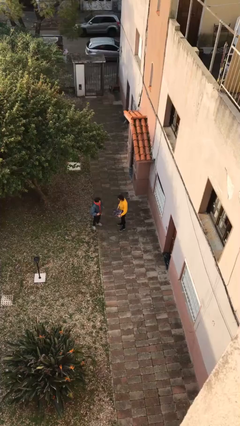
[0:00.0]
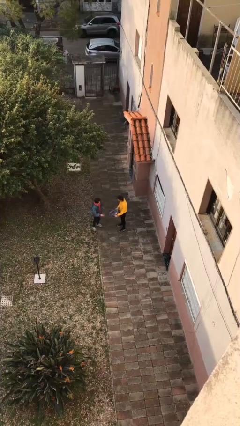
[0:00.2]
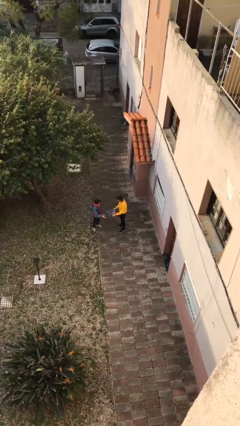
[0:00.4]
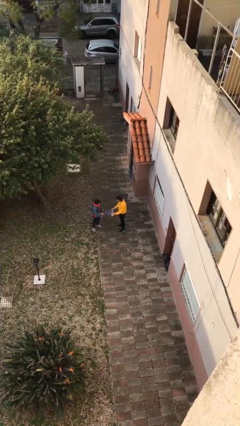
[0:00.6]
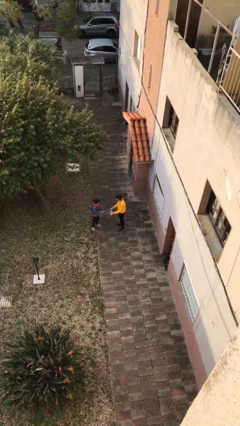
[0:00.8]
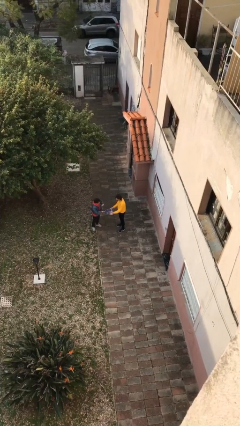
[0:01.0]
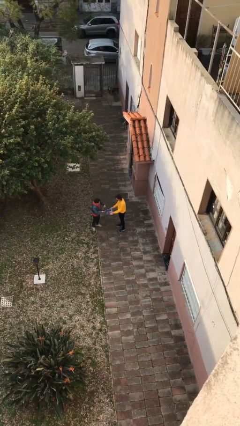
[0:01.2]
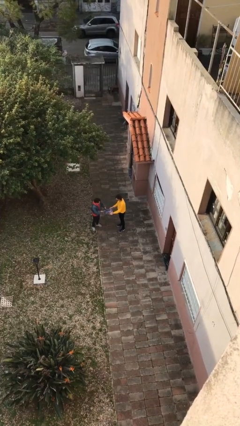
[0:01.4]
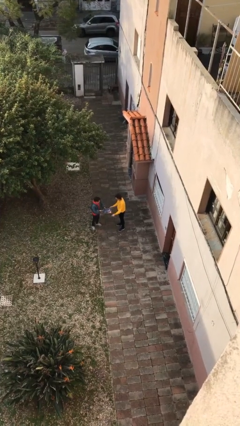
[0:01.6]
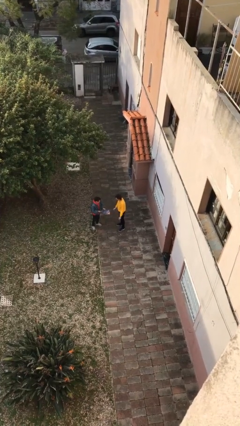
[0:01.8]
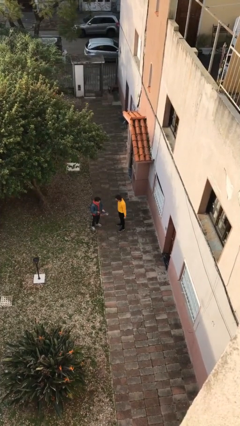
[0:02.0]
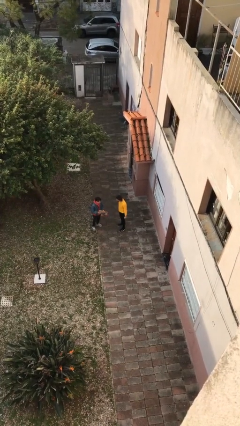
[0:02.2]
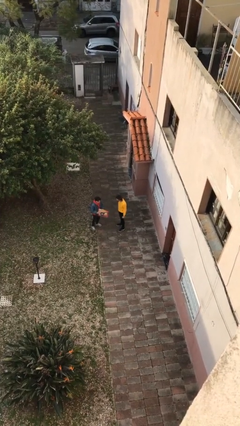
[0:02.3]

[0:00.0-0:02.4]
person transfers object to person

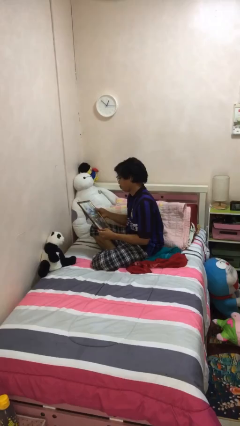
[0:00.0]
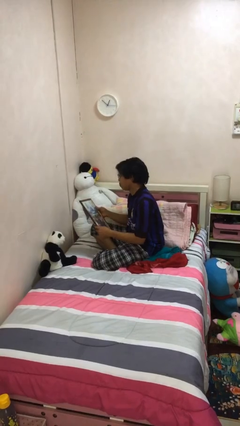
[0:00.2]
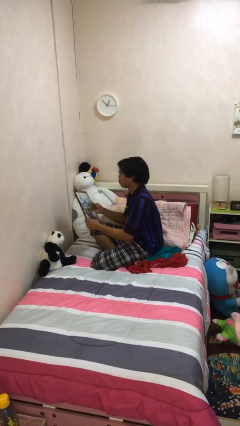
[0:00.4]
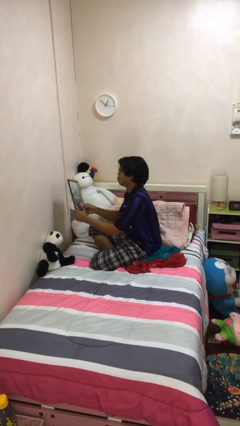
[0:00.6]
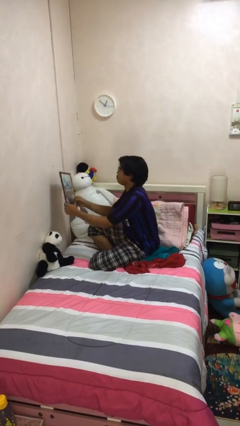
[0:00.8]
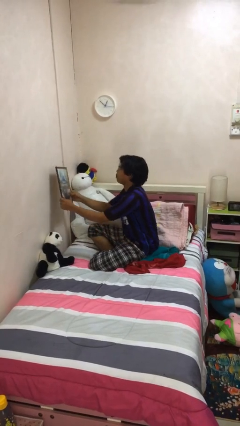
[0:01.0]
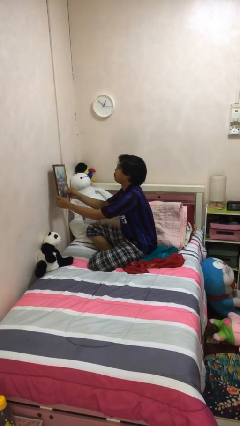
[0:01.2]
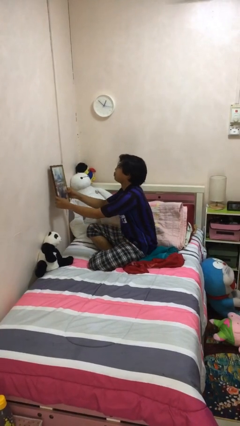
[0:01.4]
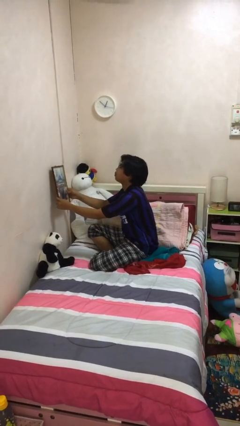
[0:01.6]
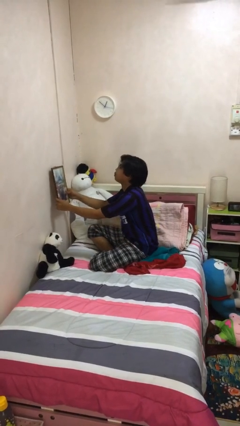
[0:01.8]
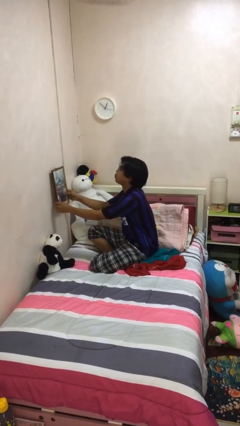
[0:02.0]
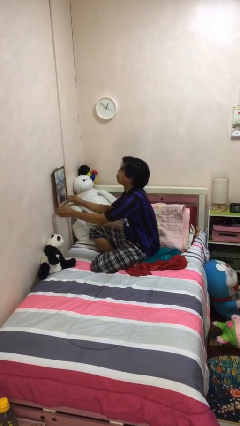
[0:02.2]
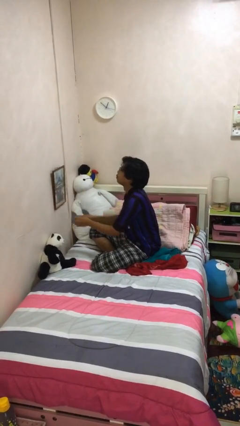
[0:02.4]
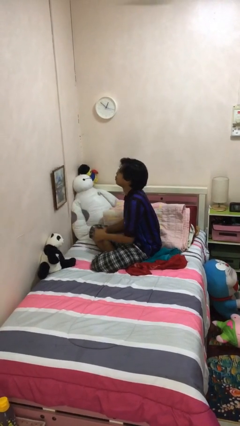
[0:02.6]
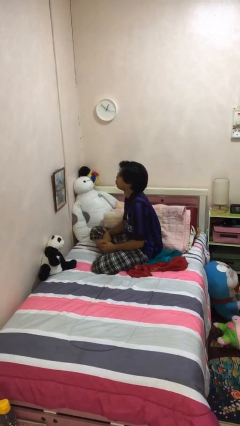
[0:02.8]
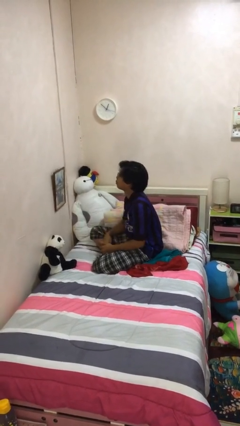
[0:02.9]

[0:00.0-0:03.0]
person puts up picture frame

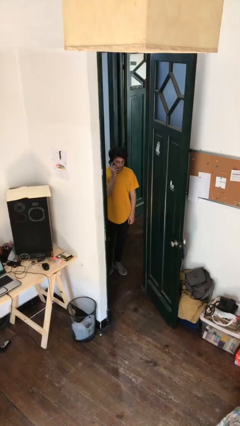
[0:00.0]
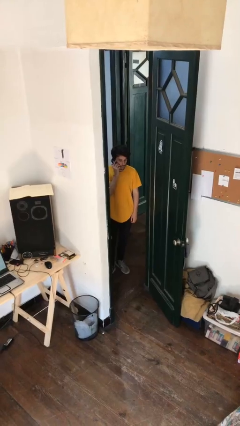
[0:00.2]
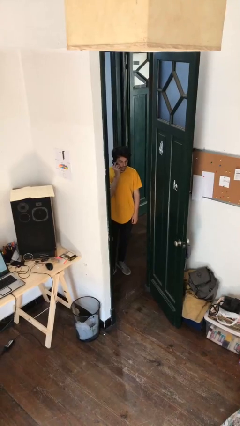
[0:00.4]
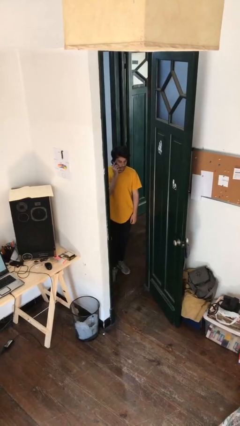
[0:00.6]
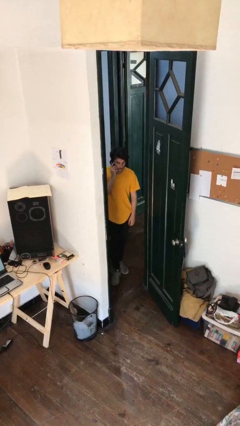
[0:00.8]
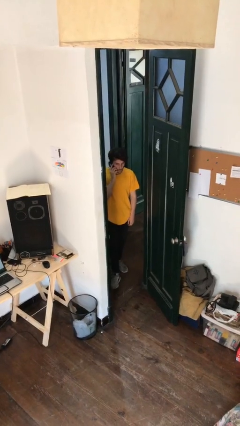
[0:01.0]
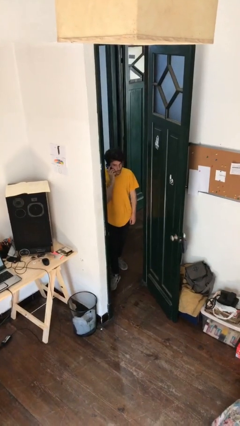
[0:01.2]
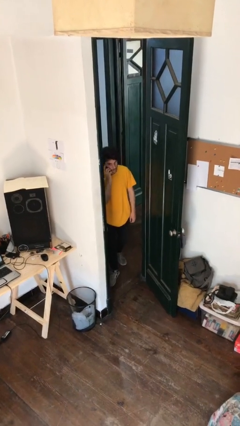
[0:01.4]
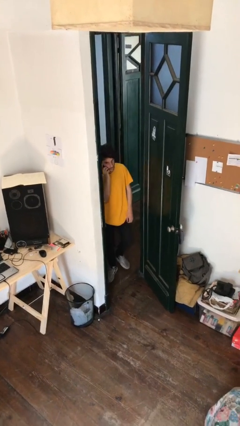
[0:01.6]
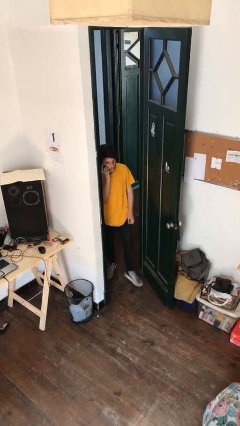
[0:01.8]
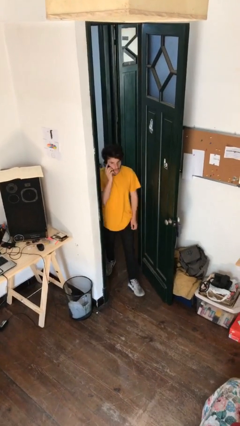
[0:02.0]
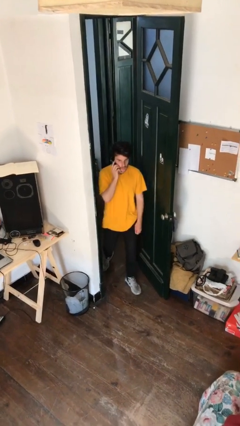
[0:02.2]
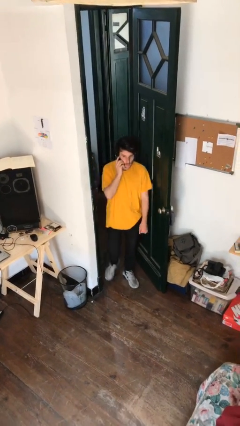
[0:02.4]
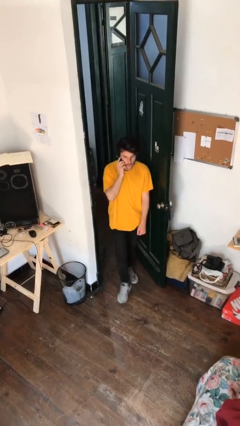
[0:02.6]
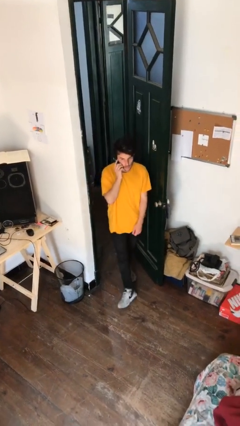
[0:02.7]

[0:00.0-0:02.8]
person enters scene through structure

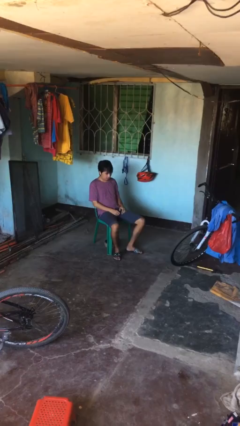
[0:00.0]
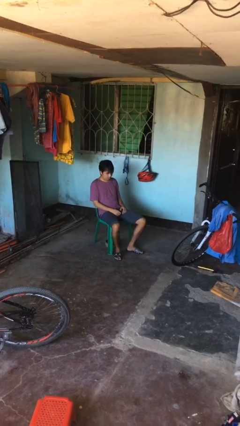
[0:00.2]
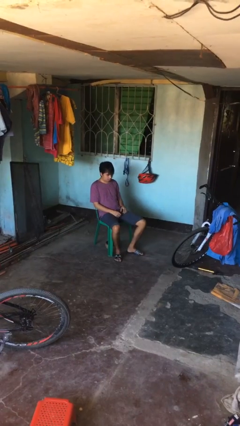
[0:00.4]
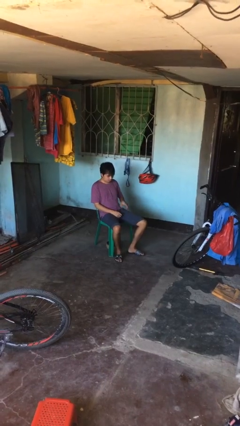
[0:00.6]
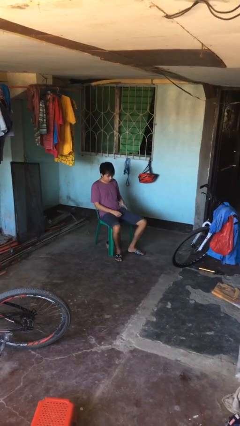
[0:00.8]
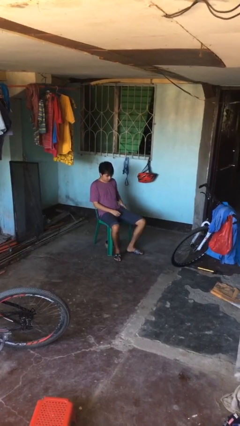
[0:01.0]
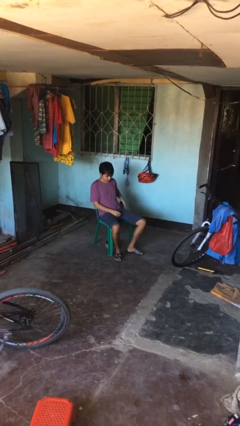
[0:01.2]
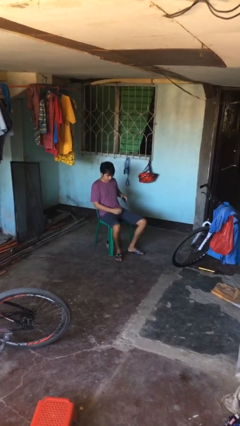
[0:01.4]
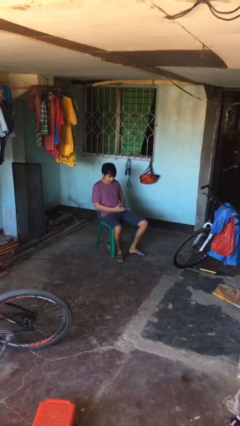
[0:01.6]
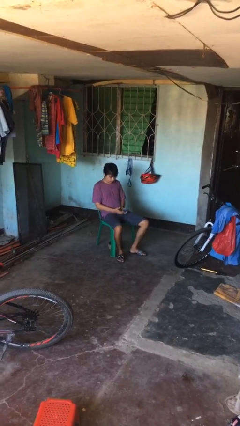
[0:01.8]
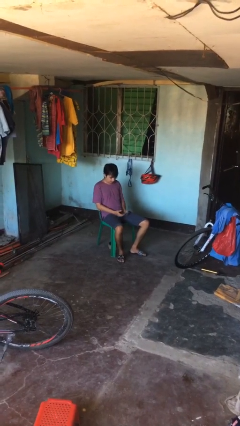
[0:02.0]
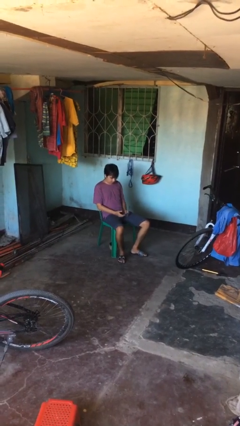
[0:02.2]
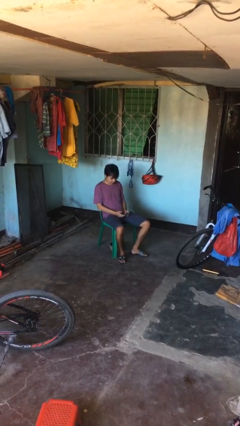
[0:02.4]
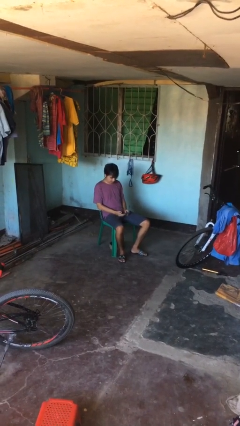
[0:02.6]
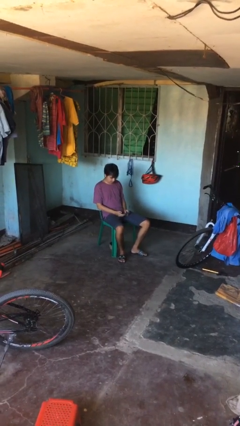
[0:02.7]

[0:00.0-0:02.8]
person takes phone from pocket

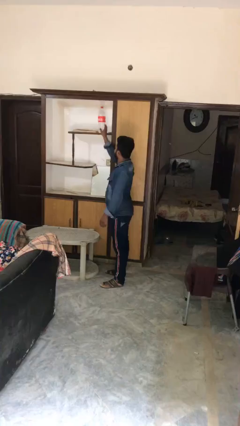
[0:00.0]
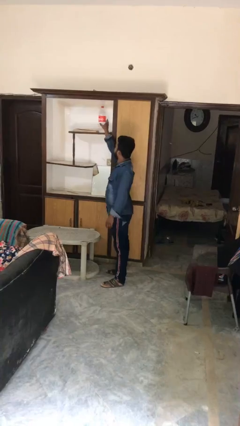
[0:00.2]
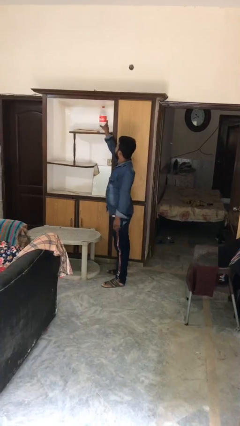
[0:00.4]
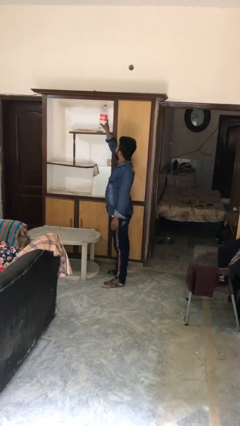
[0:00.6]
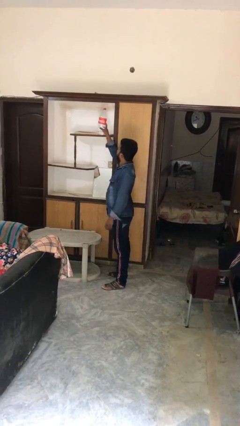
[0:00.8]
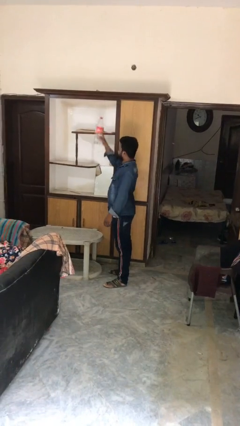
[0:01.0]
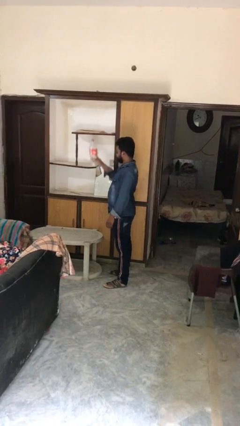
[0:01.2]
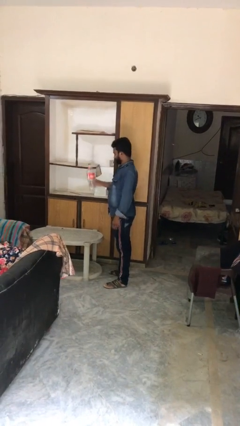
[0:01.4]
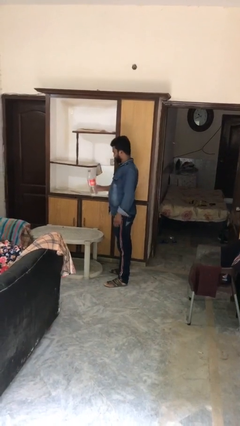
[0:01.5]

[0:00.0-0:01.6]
person picks up object from shelf

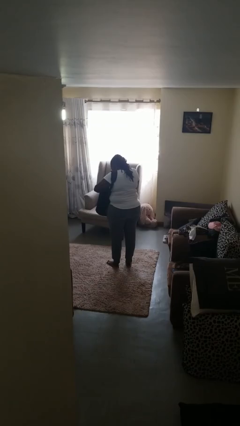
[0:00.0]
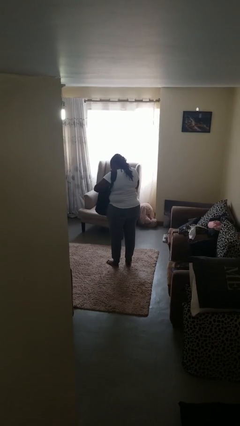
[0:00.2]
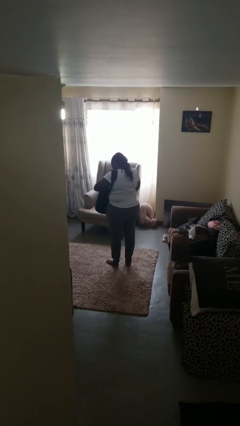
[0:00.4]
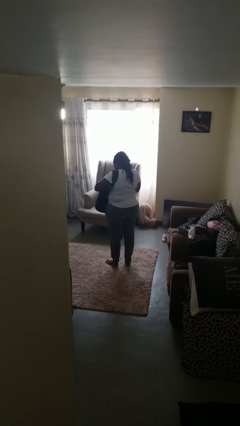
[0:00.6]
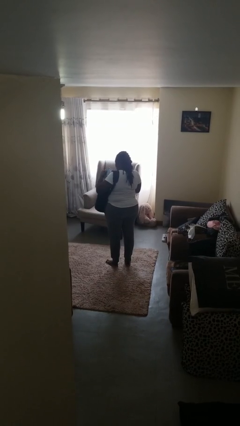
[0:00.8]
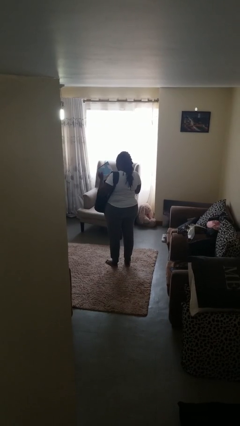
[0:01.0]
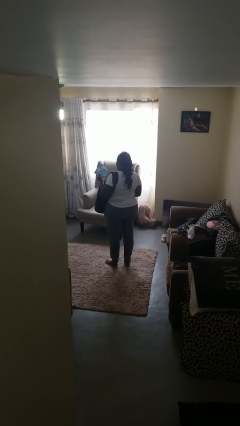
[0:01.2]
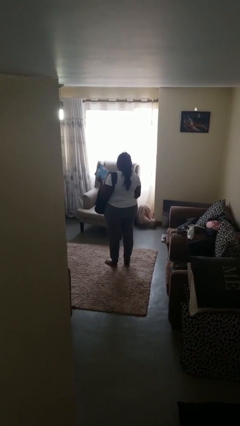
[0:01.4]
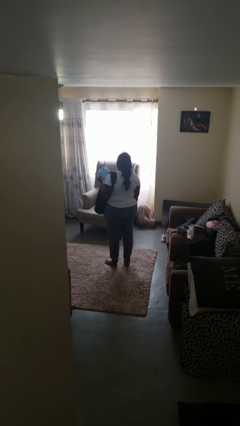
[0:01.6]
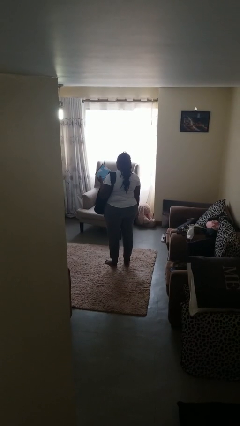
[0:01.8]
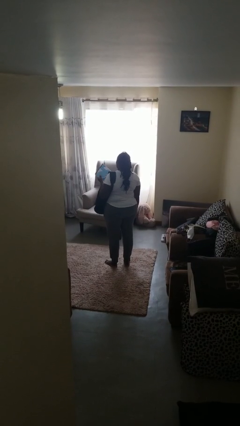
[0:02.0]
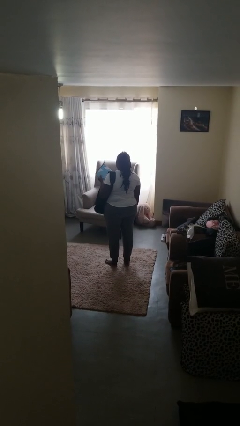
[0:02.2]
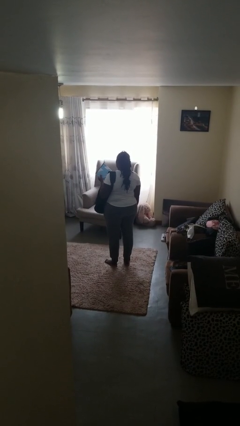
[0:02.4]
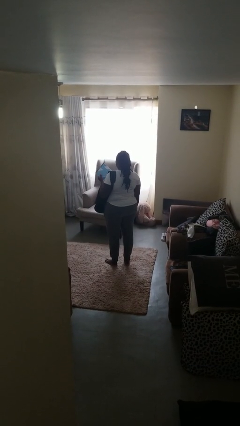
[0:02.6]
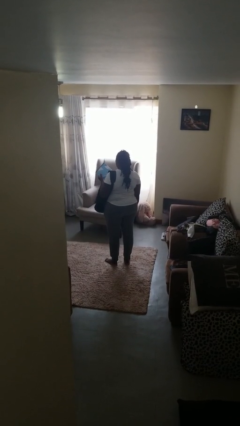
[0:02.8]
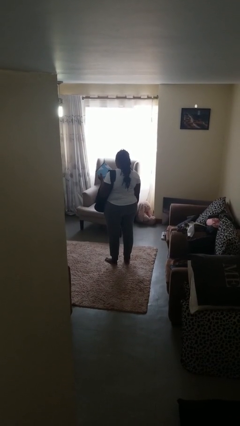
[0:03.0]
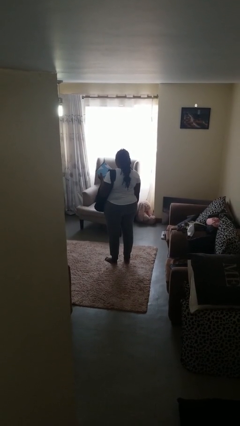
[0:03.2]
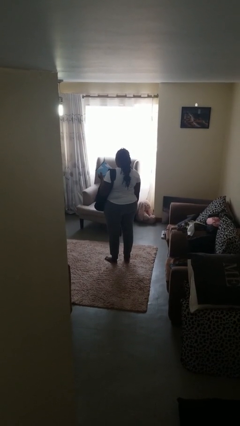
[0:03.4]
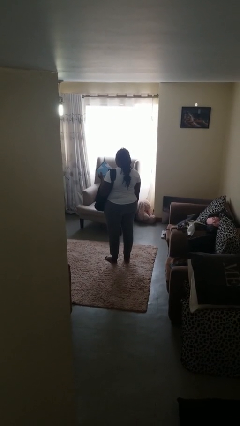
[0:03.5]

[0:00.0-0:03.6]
person takes object from backpack

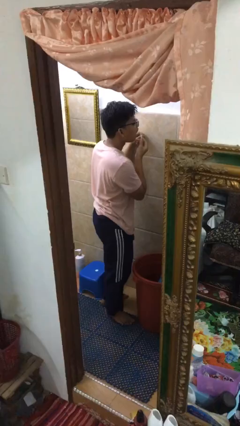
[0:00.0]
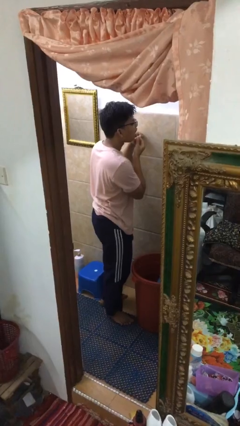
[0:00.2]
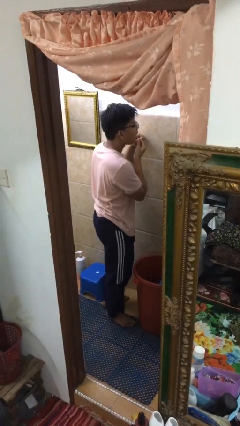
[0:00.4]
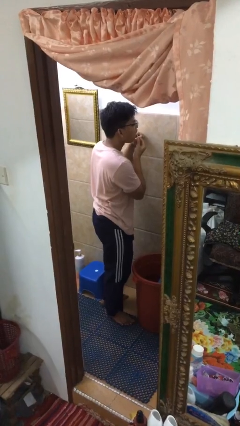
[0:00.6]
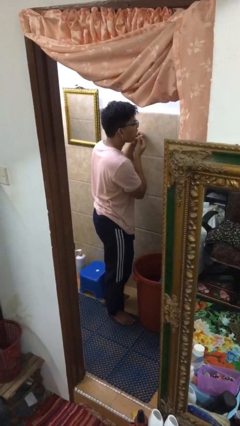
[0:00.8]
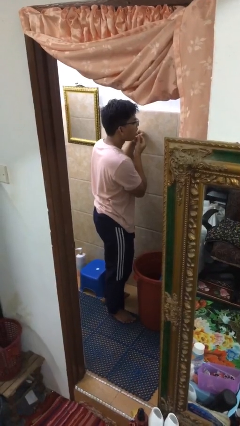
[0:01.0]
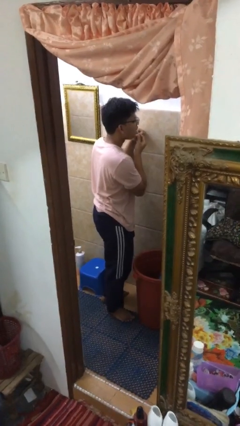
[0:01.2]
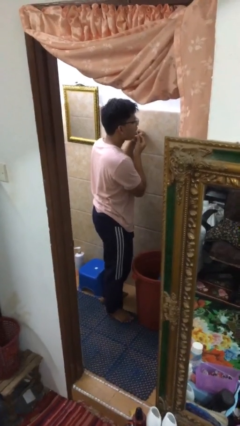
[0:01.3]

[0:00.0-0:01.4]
person flosses
